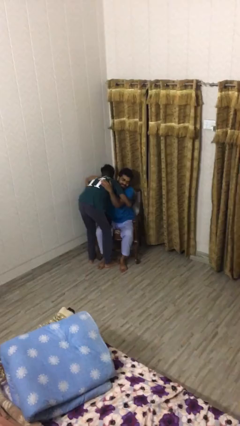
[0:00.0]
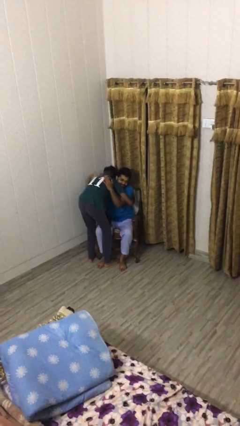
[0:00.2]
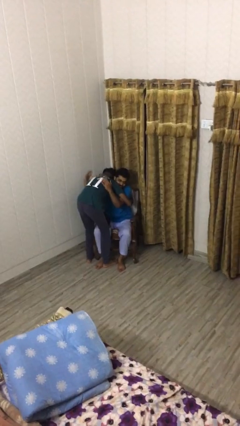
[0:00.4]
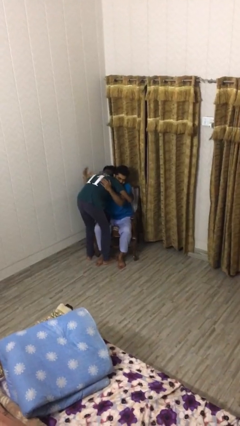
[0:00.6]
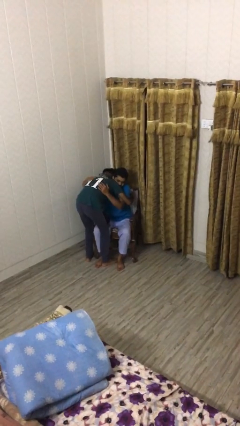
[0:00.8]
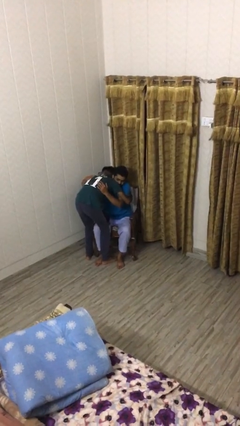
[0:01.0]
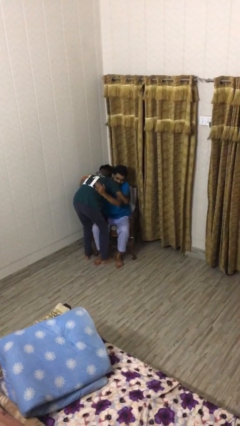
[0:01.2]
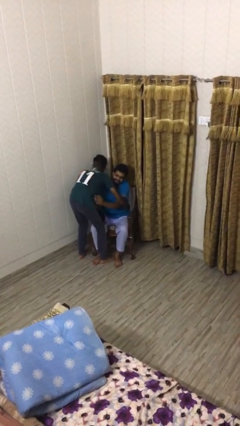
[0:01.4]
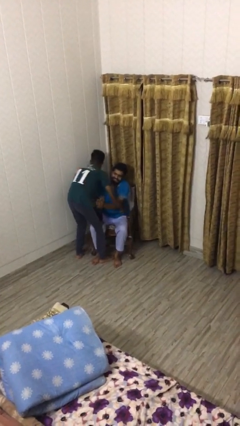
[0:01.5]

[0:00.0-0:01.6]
person embraces person

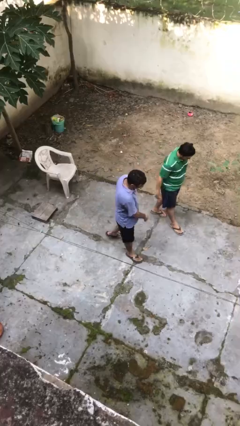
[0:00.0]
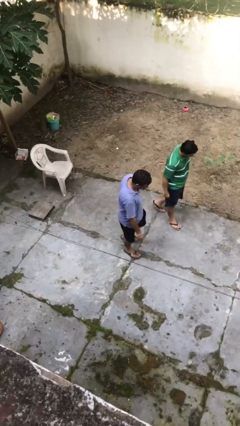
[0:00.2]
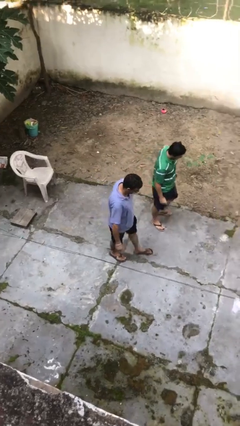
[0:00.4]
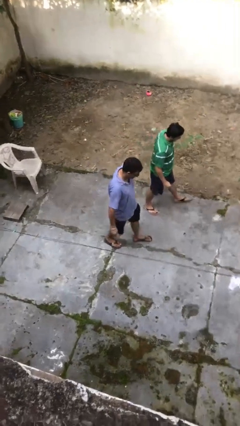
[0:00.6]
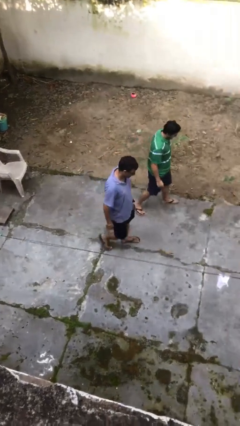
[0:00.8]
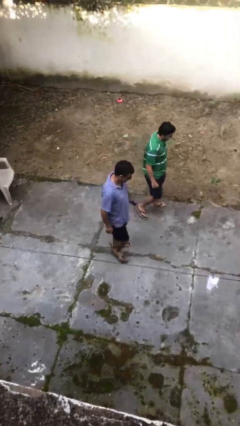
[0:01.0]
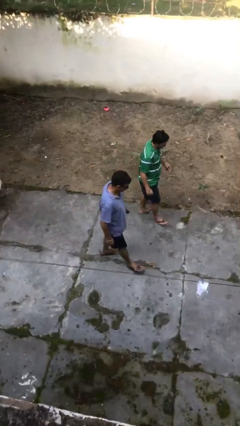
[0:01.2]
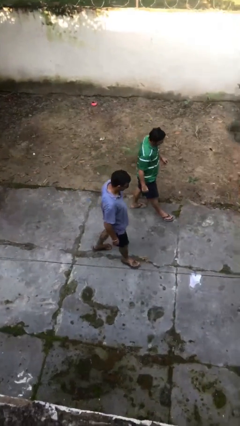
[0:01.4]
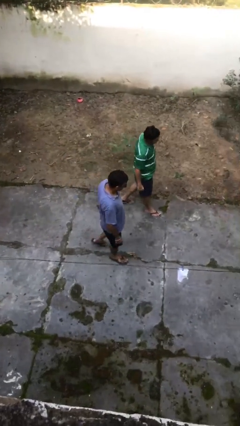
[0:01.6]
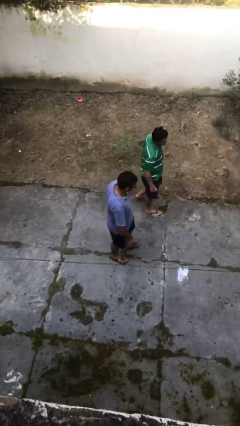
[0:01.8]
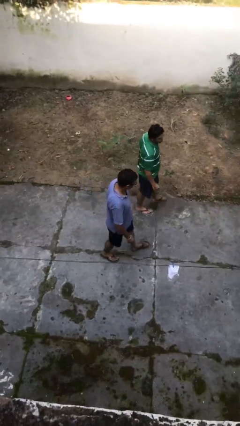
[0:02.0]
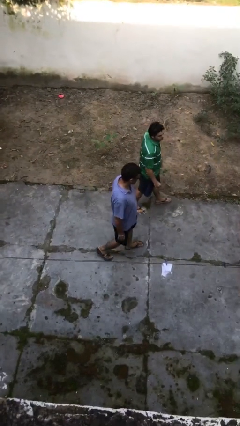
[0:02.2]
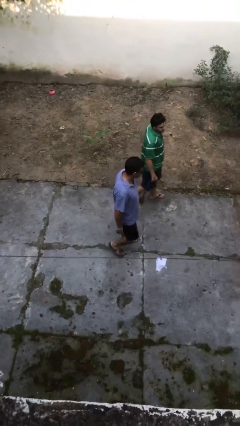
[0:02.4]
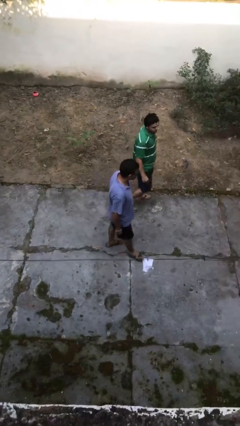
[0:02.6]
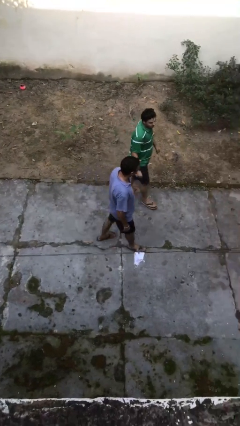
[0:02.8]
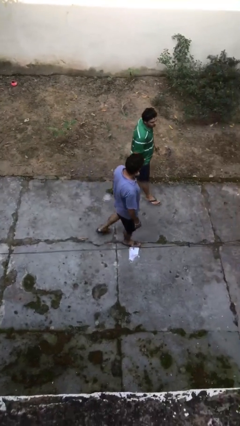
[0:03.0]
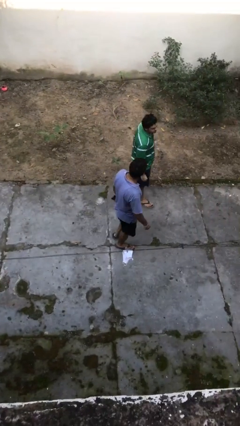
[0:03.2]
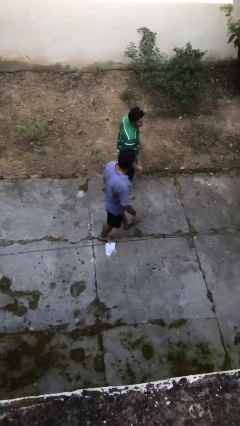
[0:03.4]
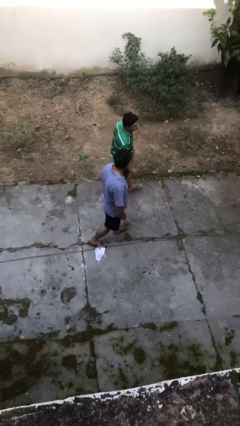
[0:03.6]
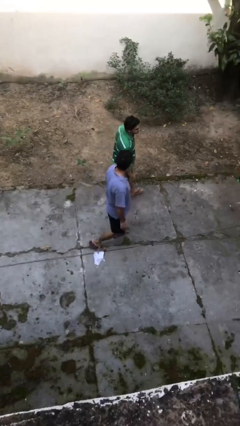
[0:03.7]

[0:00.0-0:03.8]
person talks to person

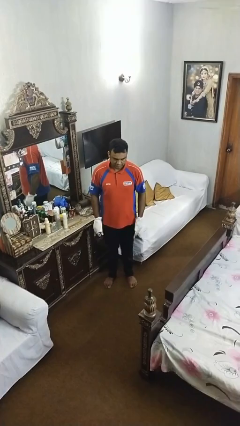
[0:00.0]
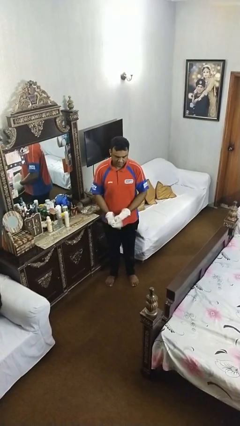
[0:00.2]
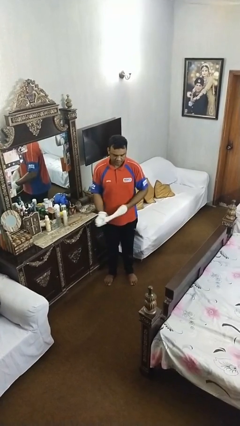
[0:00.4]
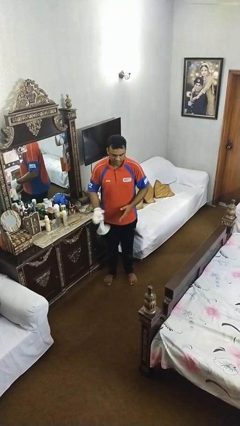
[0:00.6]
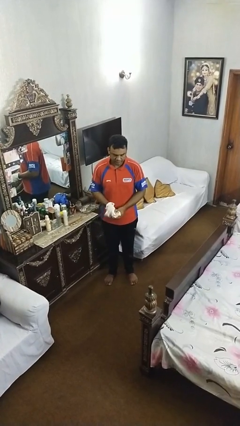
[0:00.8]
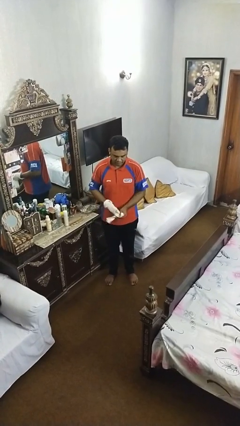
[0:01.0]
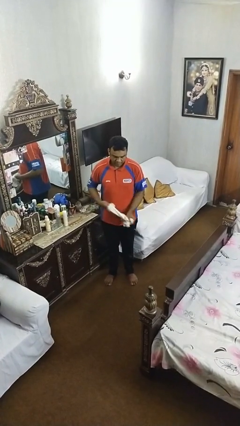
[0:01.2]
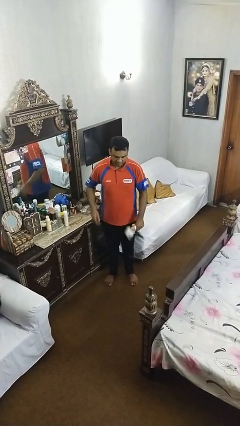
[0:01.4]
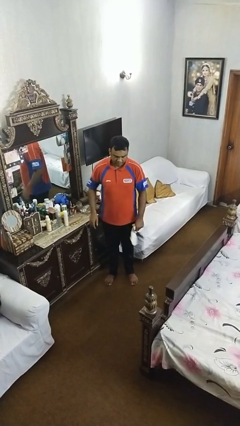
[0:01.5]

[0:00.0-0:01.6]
person takes off gloves

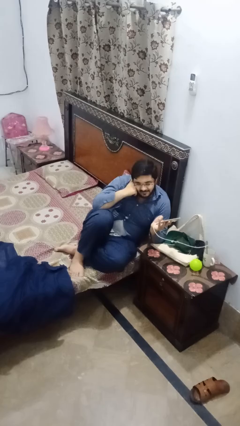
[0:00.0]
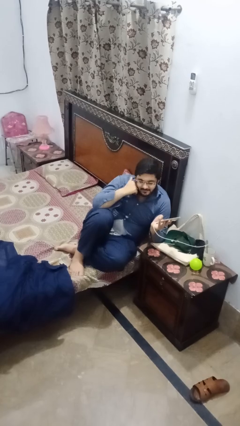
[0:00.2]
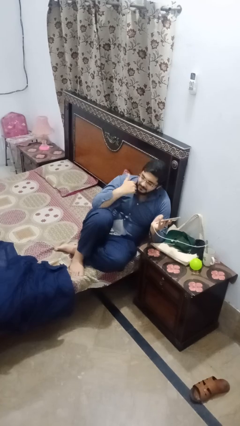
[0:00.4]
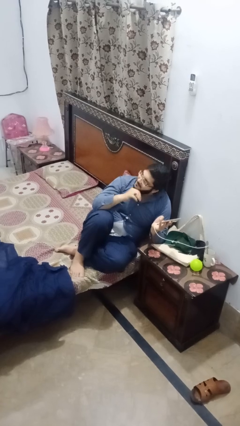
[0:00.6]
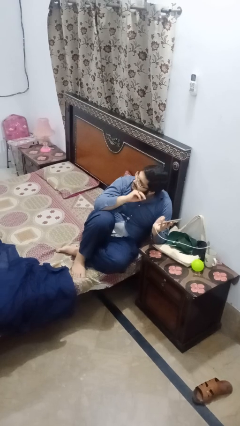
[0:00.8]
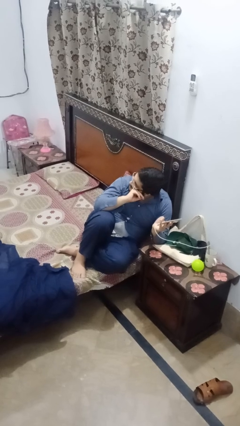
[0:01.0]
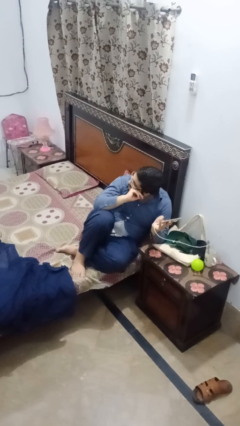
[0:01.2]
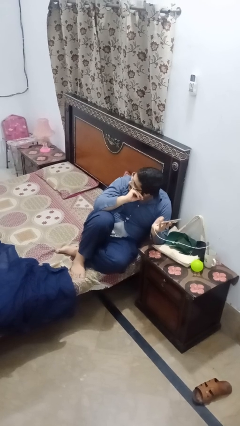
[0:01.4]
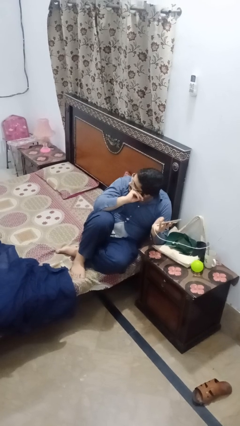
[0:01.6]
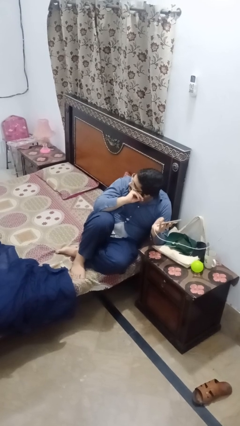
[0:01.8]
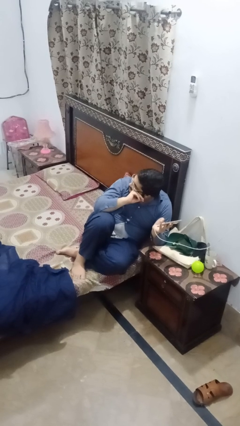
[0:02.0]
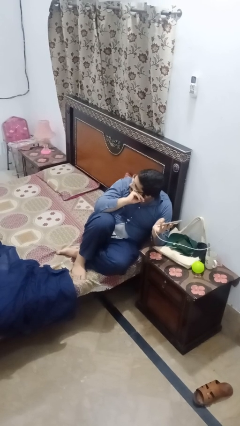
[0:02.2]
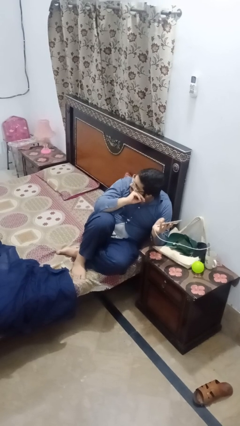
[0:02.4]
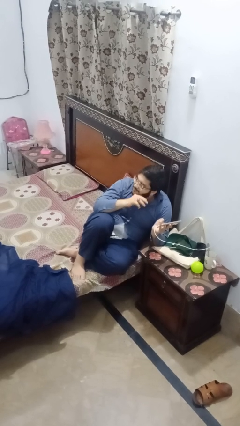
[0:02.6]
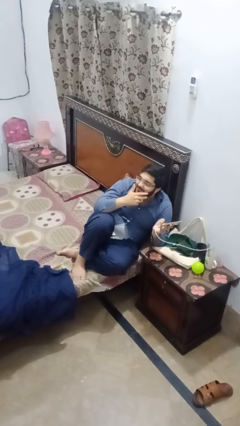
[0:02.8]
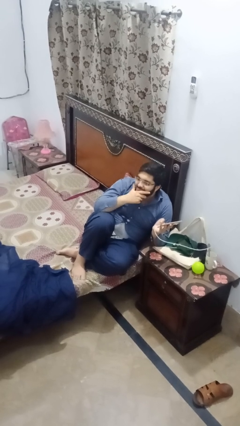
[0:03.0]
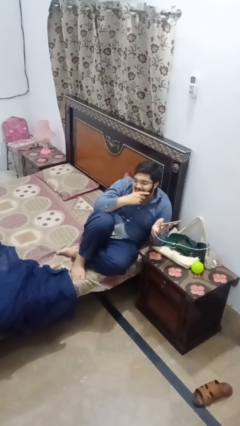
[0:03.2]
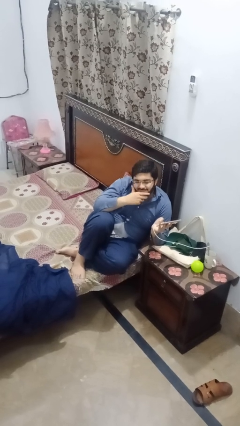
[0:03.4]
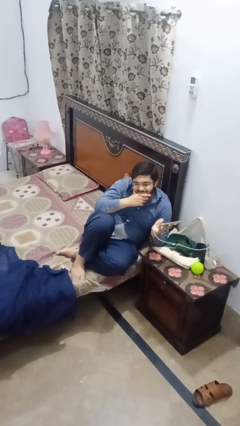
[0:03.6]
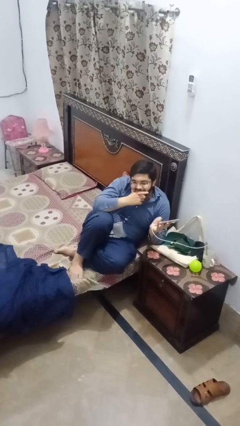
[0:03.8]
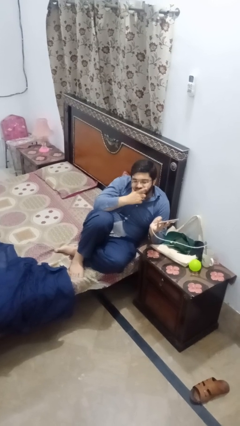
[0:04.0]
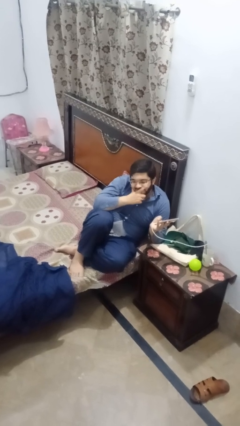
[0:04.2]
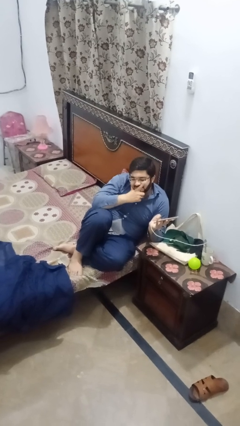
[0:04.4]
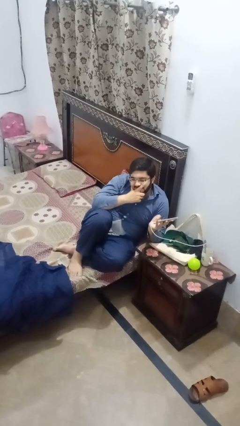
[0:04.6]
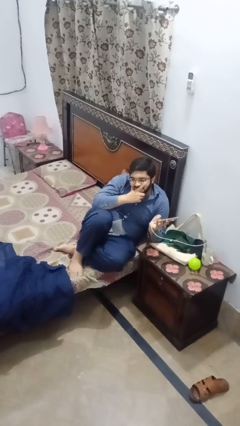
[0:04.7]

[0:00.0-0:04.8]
person strokes chin

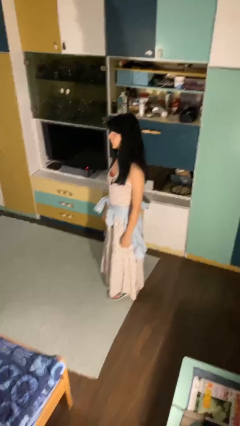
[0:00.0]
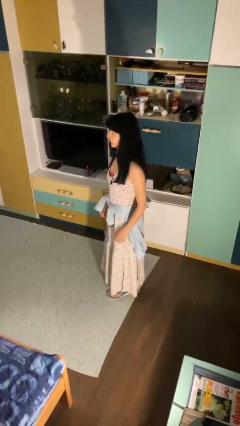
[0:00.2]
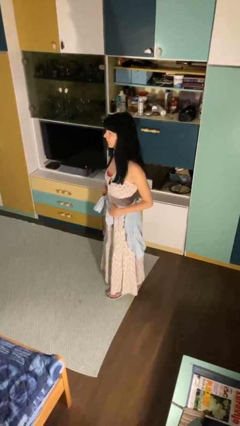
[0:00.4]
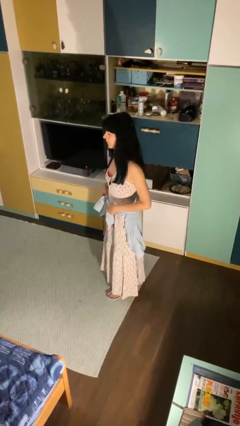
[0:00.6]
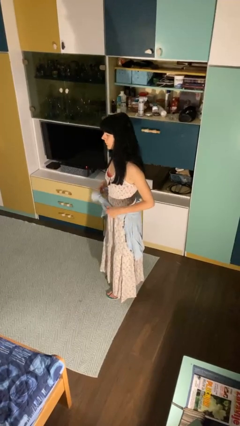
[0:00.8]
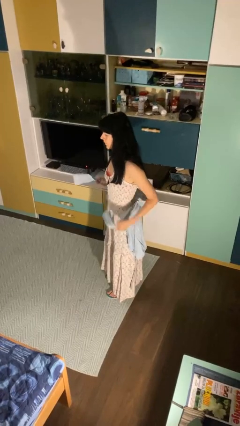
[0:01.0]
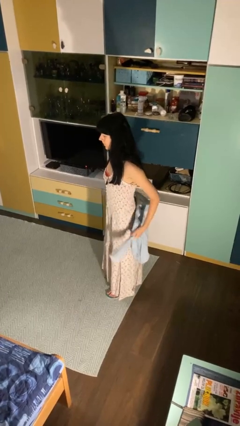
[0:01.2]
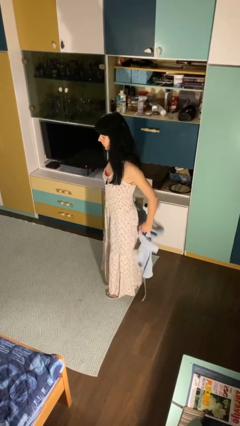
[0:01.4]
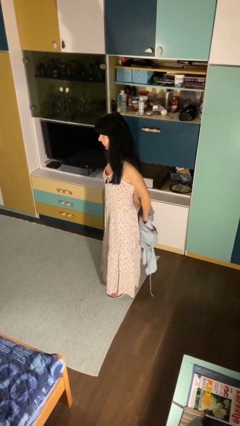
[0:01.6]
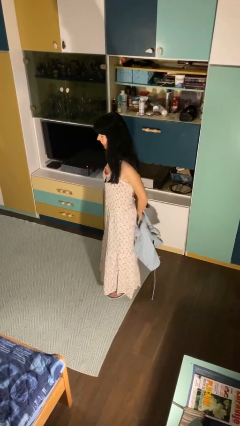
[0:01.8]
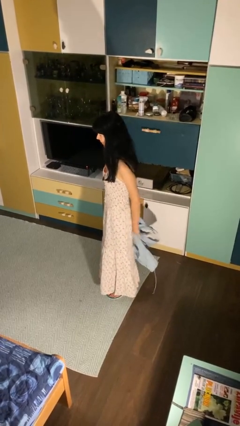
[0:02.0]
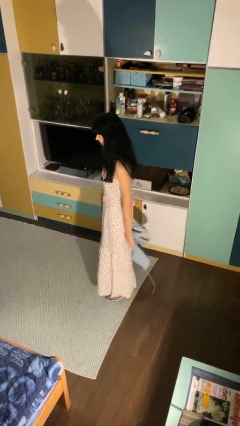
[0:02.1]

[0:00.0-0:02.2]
person unties jacket around waist

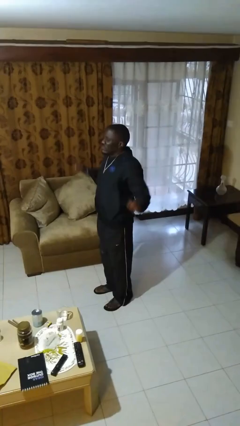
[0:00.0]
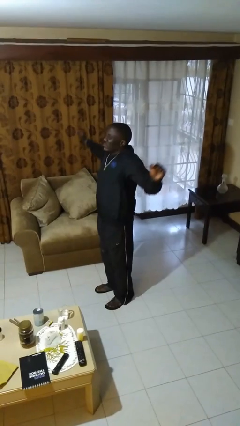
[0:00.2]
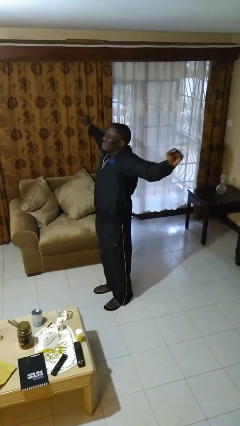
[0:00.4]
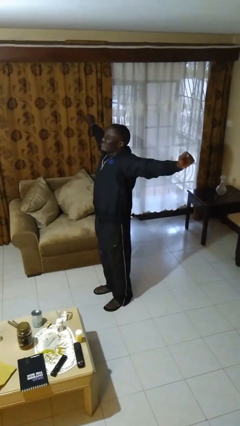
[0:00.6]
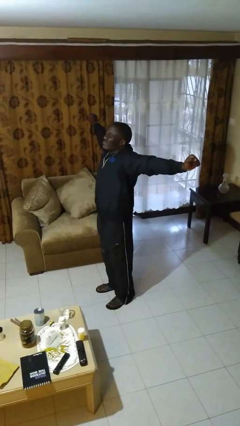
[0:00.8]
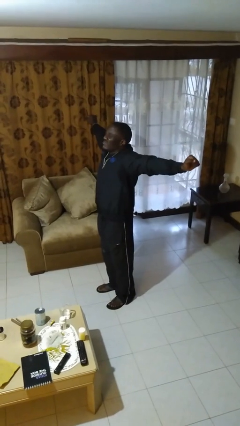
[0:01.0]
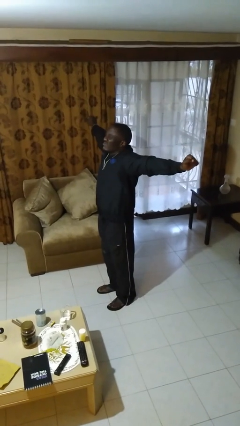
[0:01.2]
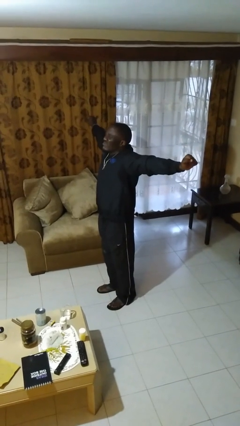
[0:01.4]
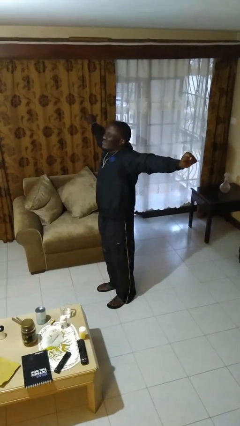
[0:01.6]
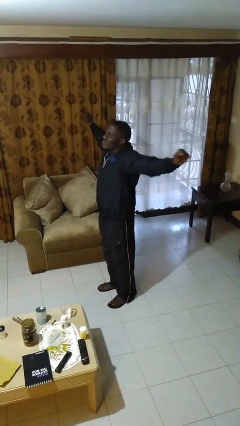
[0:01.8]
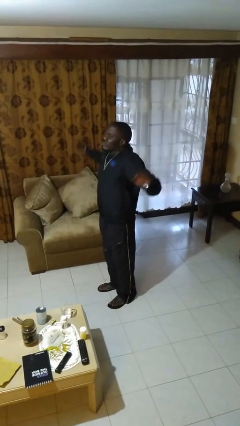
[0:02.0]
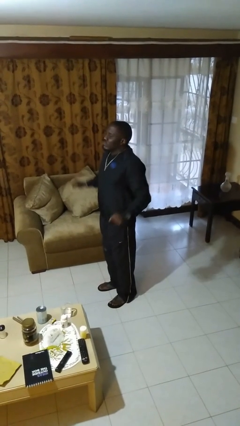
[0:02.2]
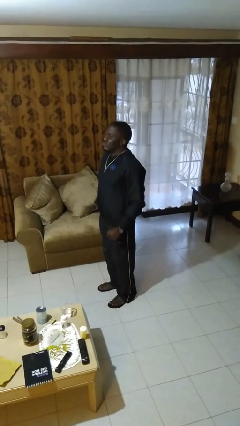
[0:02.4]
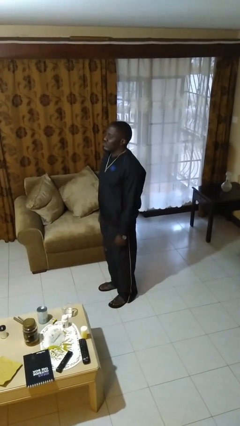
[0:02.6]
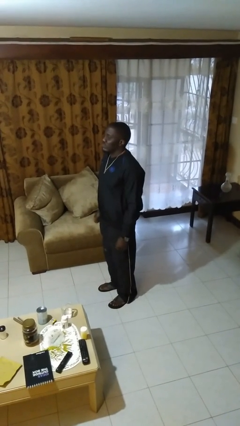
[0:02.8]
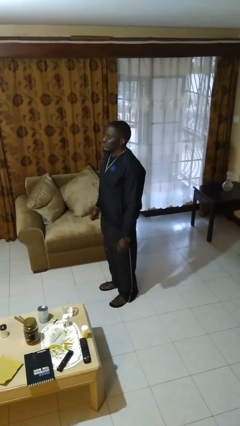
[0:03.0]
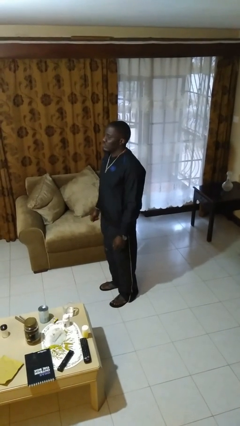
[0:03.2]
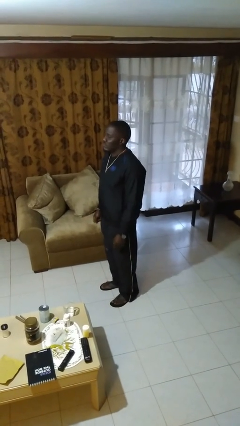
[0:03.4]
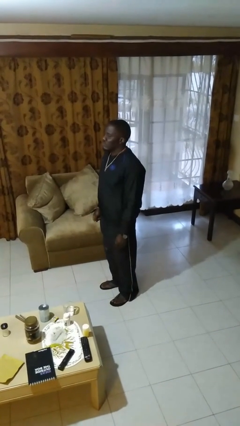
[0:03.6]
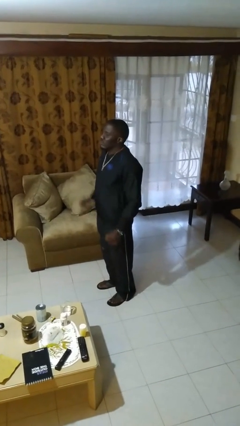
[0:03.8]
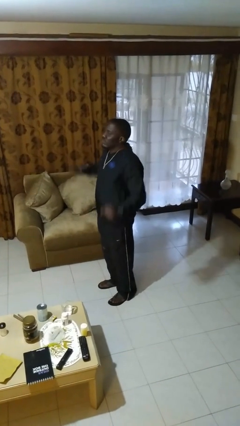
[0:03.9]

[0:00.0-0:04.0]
person stretches arms to side
